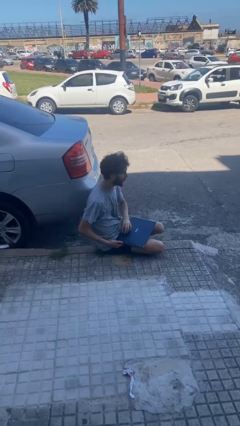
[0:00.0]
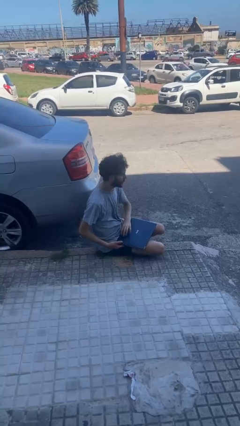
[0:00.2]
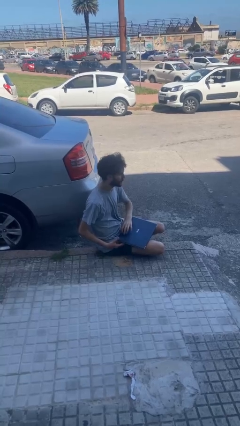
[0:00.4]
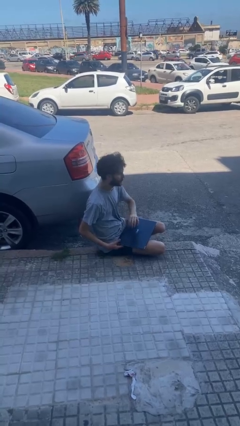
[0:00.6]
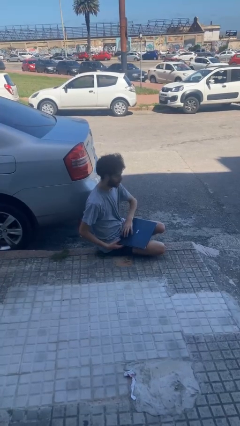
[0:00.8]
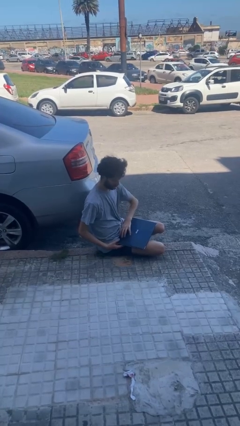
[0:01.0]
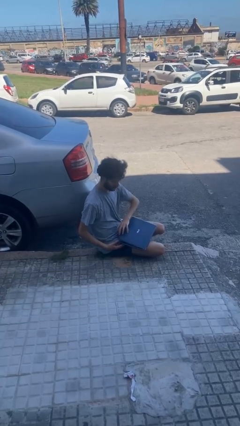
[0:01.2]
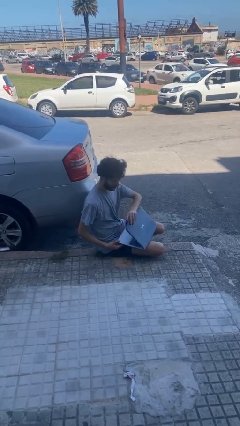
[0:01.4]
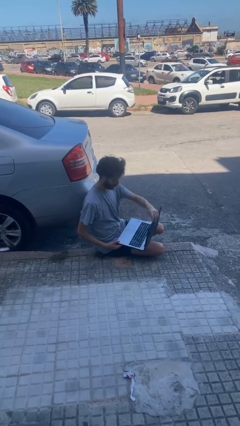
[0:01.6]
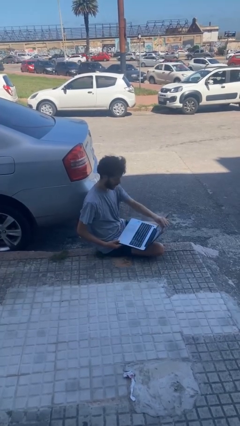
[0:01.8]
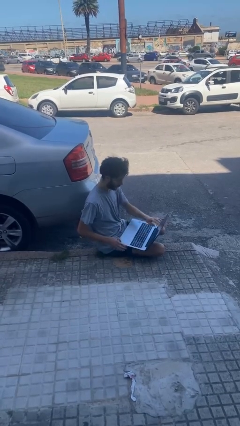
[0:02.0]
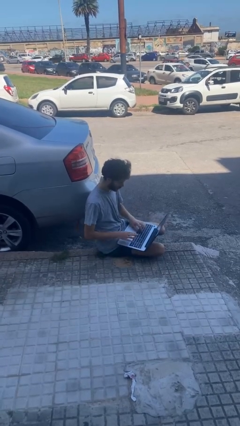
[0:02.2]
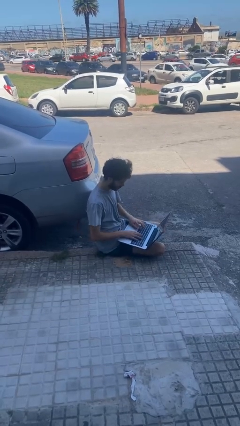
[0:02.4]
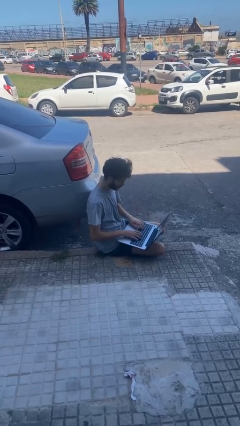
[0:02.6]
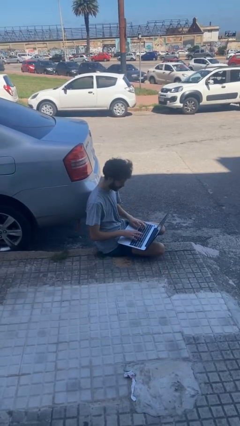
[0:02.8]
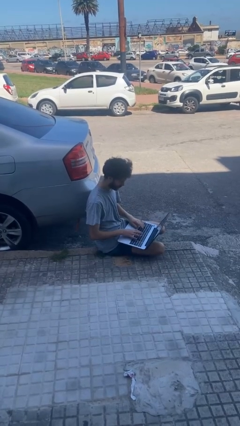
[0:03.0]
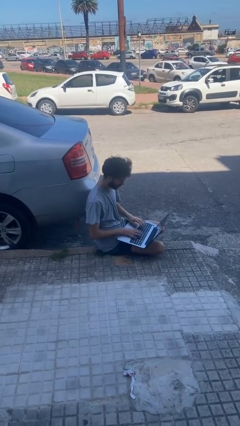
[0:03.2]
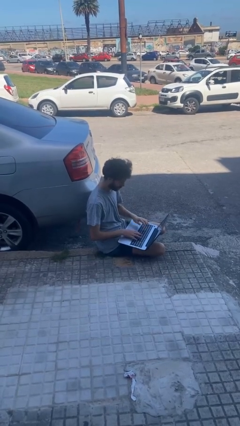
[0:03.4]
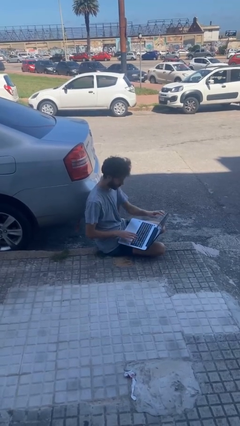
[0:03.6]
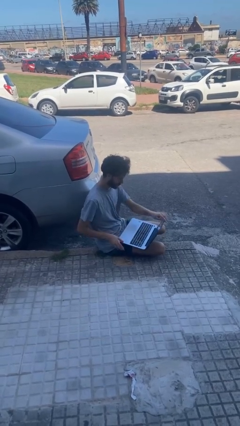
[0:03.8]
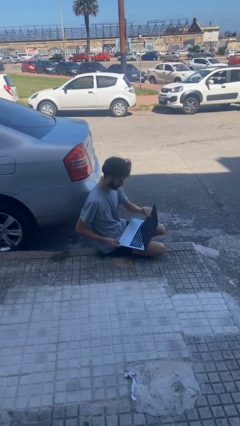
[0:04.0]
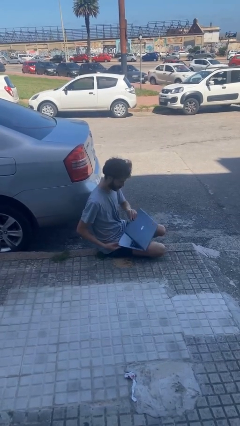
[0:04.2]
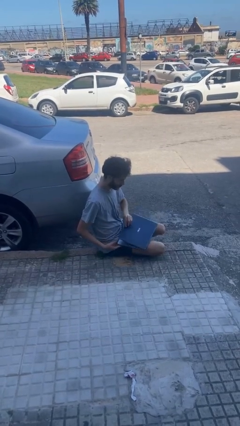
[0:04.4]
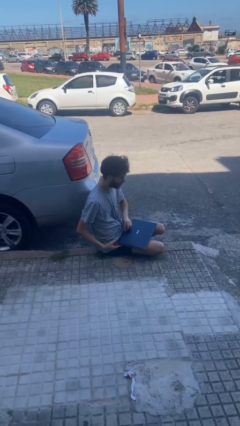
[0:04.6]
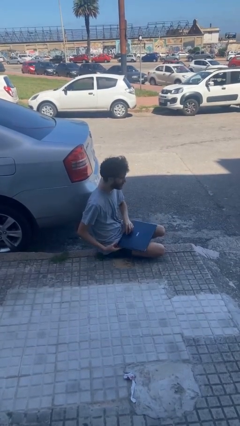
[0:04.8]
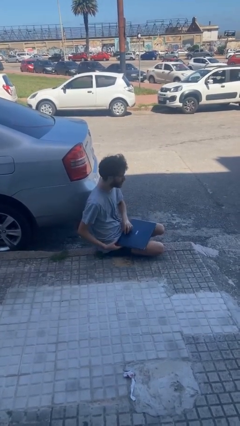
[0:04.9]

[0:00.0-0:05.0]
person interacts with laptop

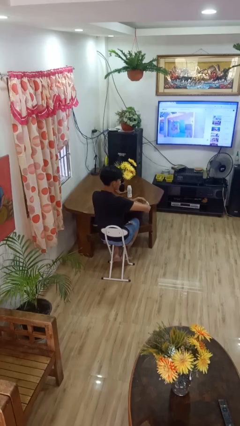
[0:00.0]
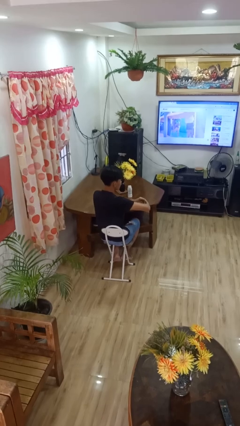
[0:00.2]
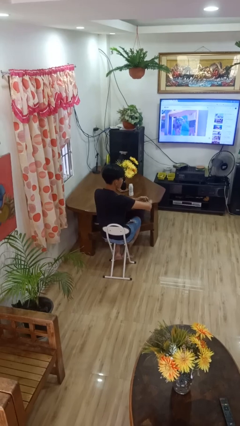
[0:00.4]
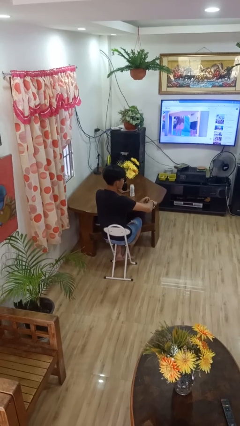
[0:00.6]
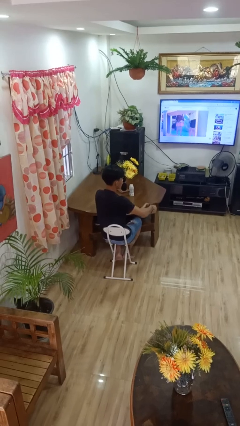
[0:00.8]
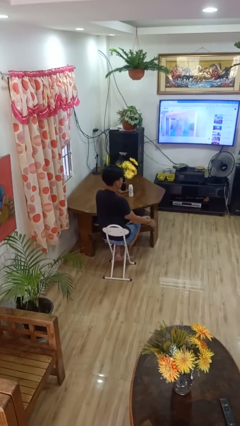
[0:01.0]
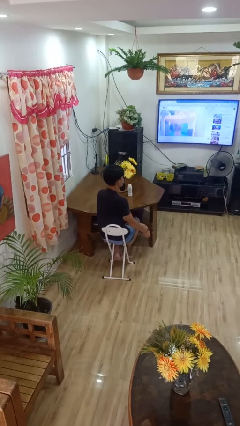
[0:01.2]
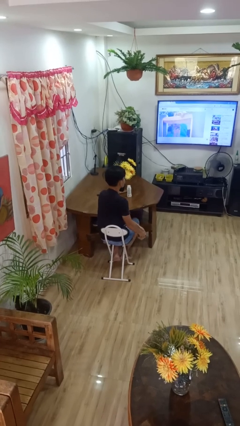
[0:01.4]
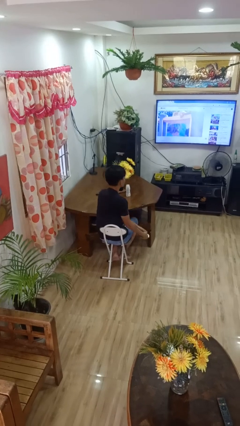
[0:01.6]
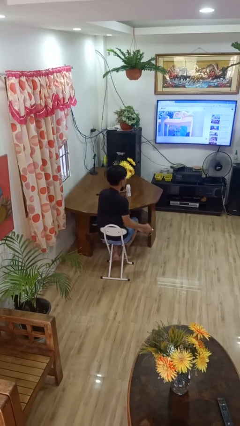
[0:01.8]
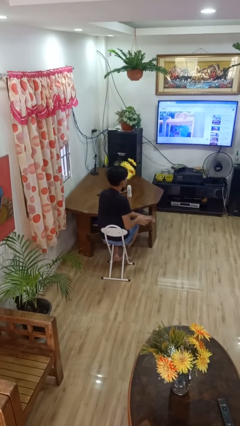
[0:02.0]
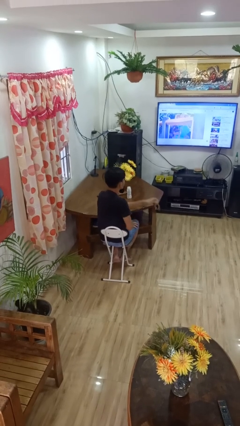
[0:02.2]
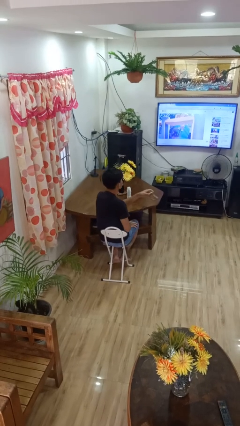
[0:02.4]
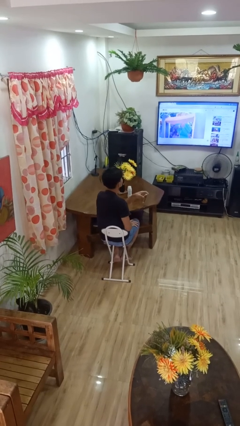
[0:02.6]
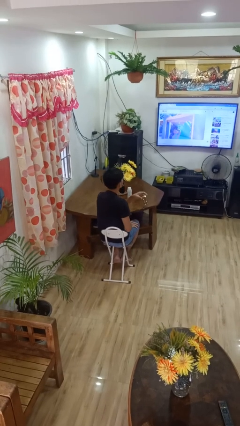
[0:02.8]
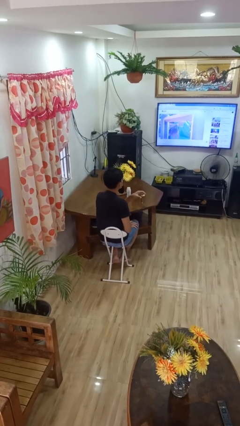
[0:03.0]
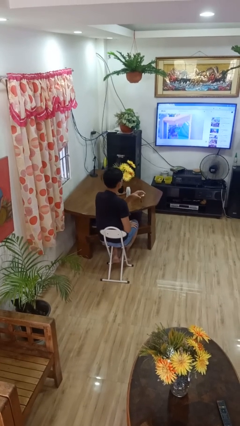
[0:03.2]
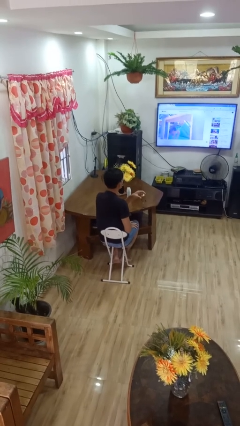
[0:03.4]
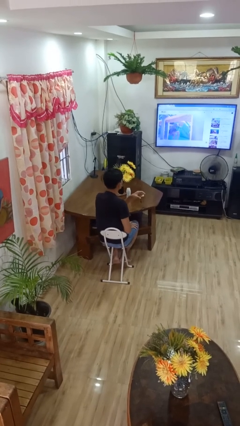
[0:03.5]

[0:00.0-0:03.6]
person takes off wristwatch

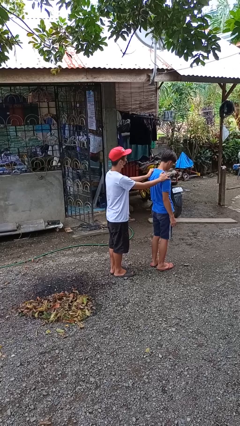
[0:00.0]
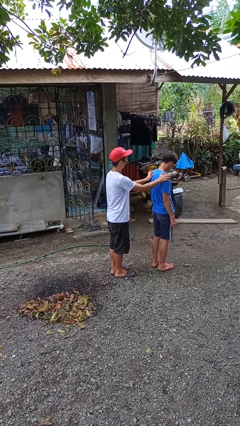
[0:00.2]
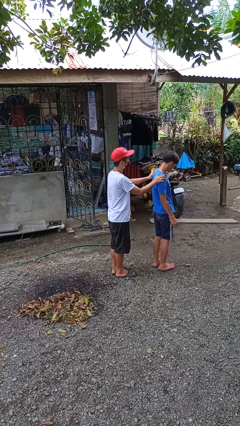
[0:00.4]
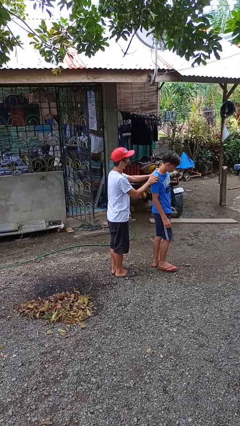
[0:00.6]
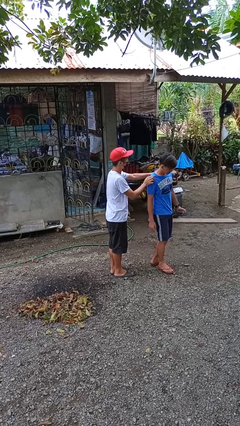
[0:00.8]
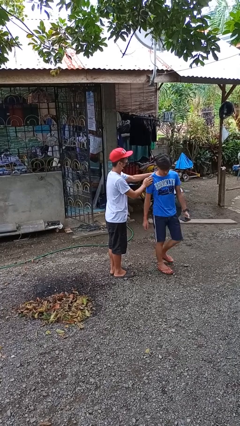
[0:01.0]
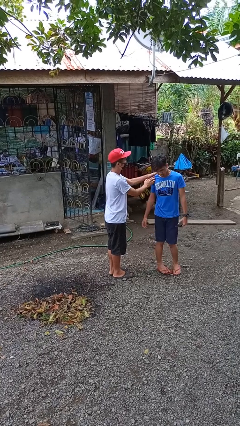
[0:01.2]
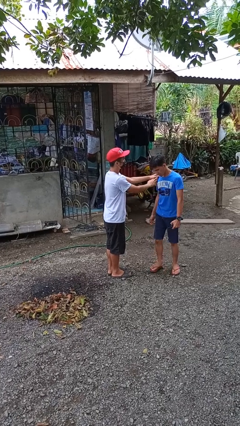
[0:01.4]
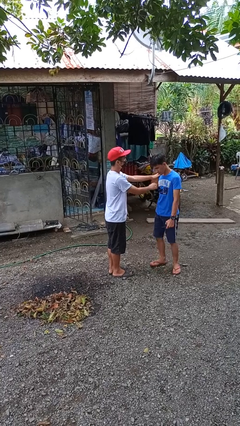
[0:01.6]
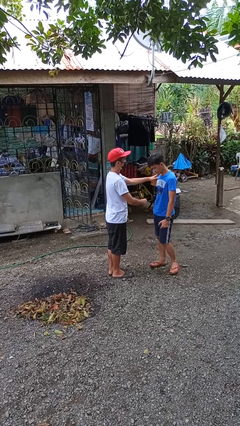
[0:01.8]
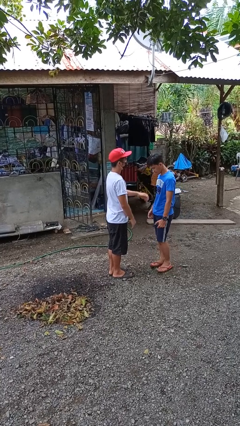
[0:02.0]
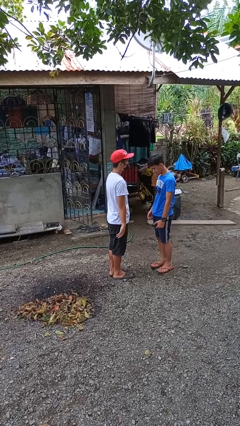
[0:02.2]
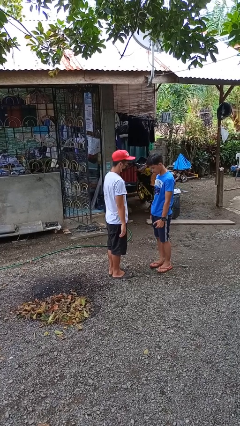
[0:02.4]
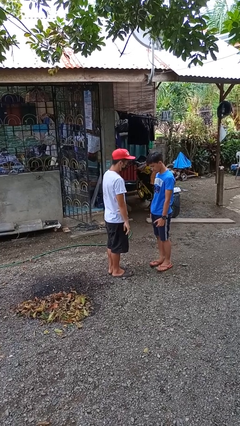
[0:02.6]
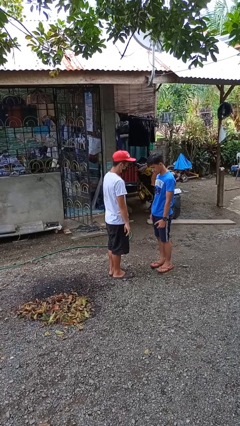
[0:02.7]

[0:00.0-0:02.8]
person spins person around

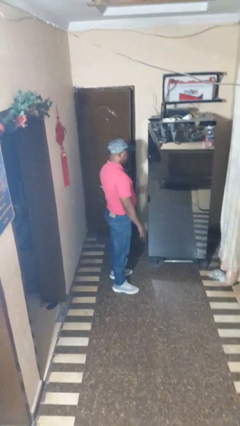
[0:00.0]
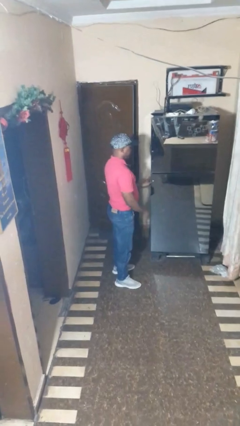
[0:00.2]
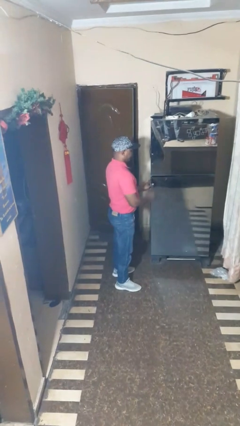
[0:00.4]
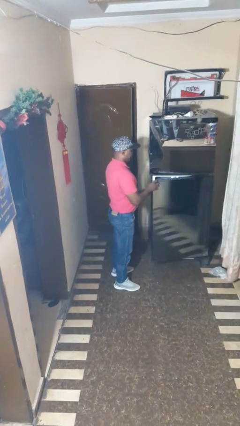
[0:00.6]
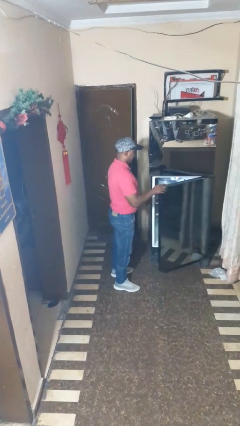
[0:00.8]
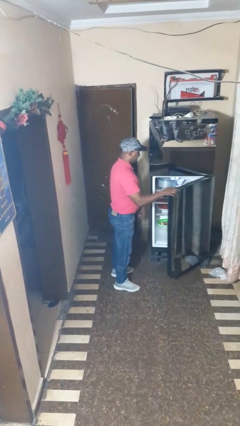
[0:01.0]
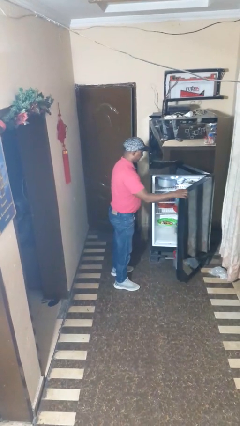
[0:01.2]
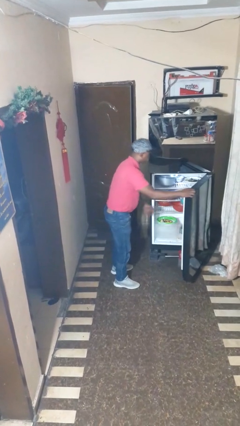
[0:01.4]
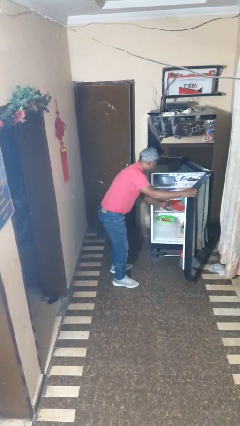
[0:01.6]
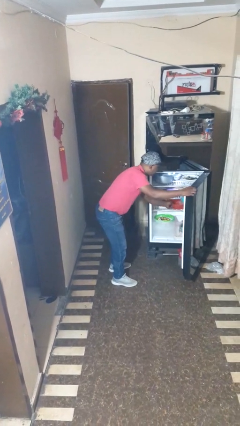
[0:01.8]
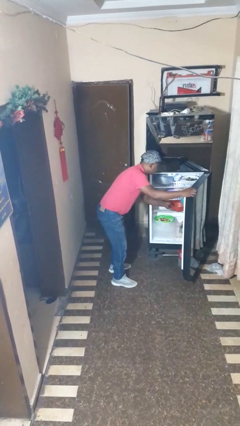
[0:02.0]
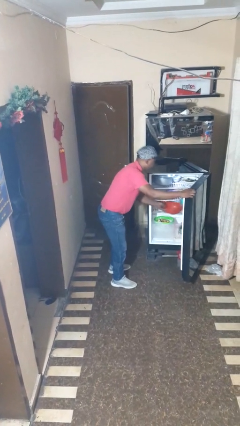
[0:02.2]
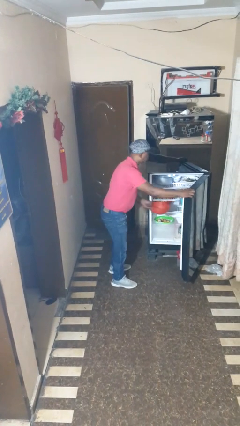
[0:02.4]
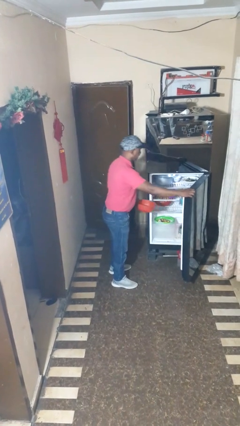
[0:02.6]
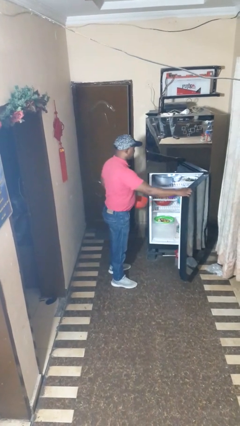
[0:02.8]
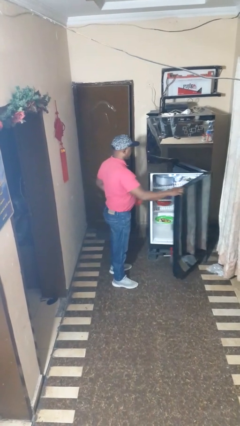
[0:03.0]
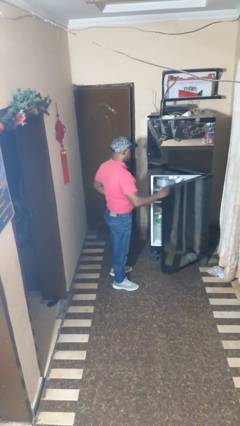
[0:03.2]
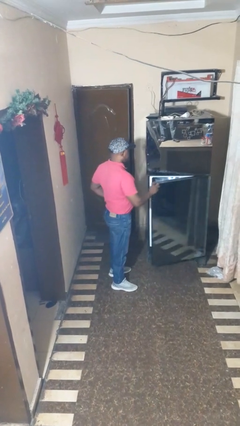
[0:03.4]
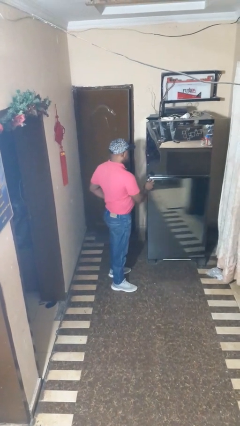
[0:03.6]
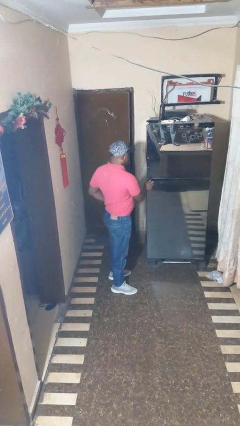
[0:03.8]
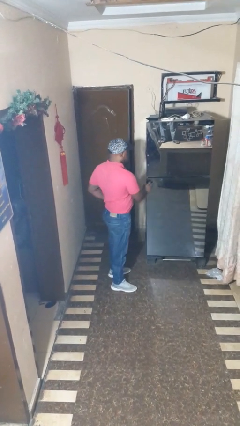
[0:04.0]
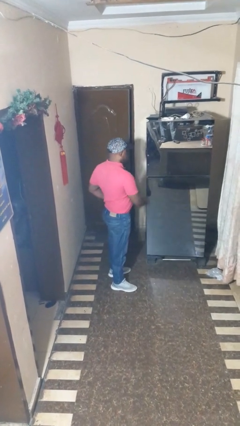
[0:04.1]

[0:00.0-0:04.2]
person takes object from refrigerator

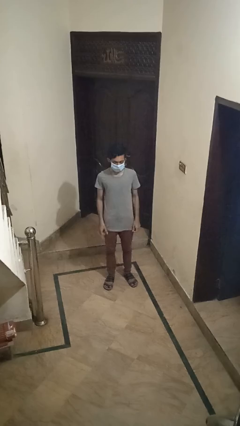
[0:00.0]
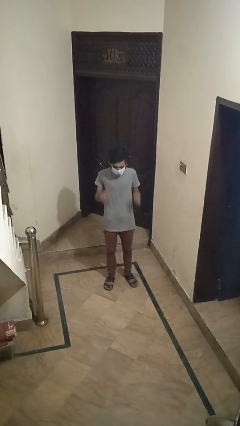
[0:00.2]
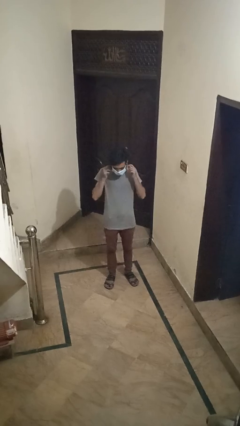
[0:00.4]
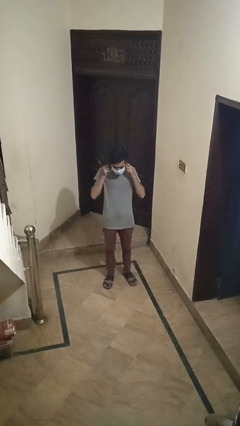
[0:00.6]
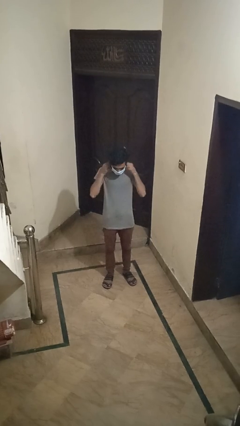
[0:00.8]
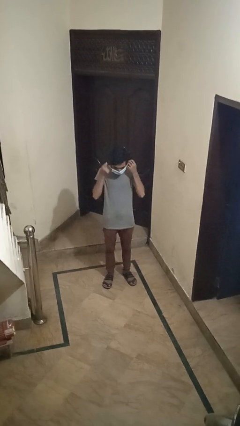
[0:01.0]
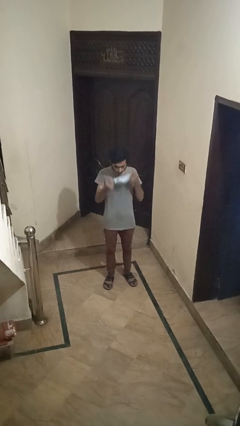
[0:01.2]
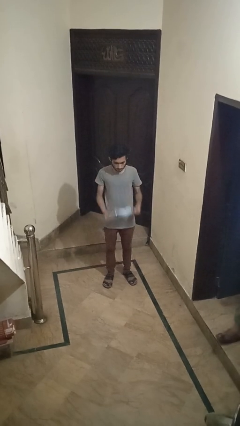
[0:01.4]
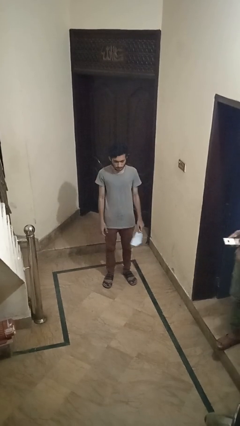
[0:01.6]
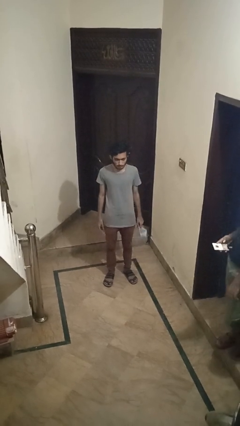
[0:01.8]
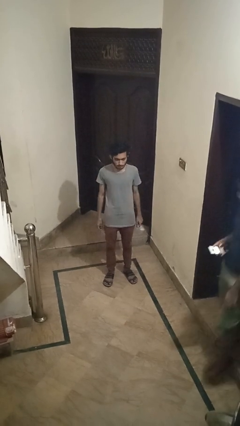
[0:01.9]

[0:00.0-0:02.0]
person takes off facemask
